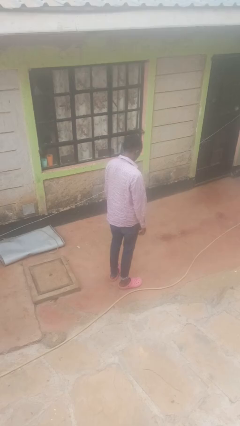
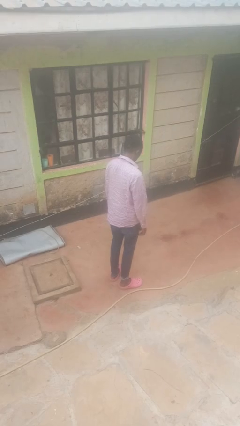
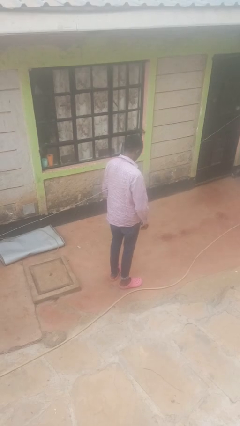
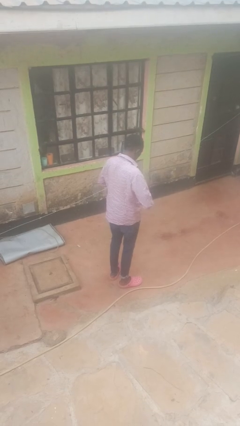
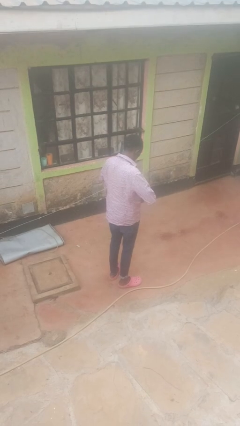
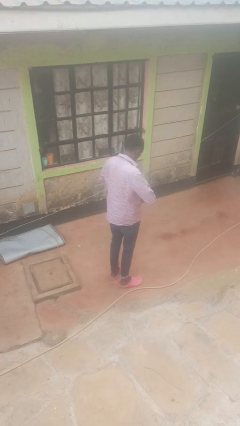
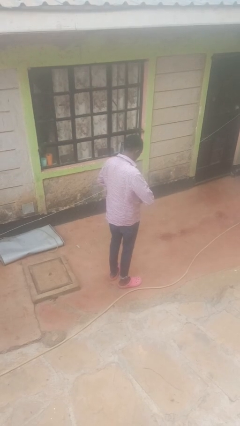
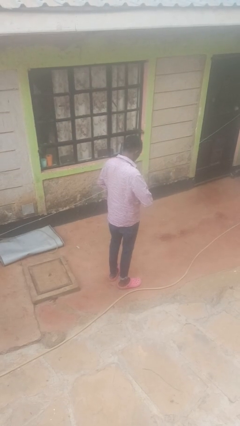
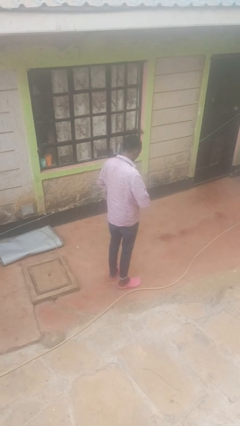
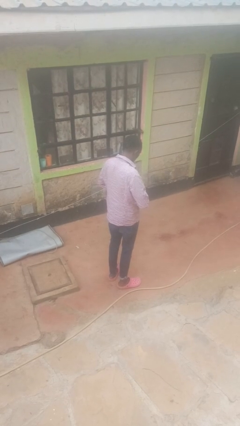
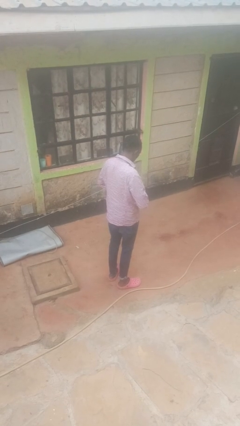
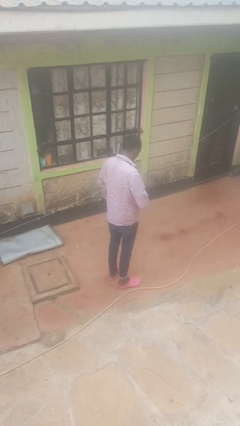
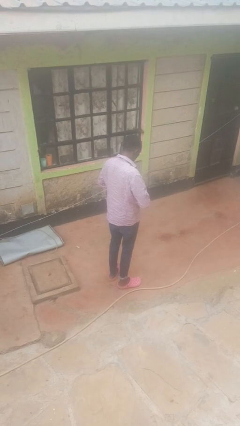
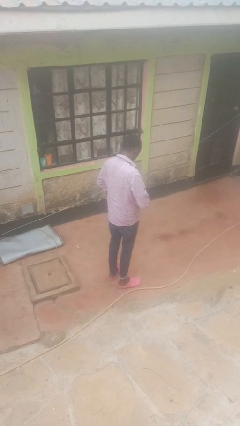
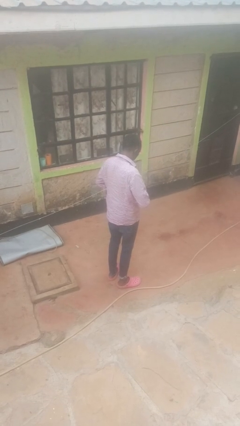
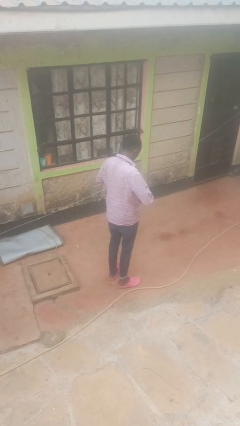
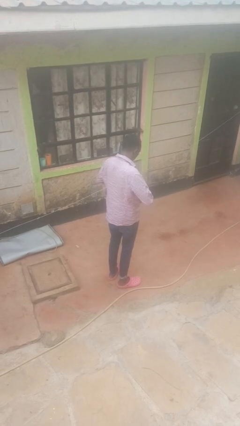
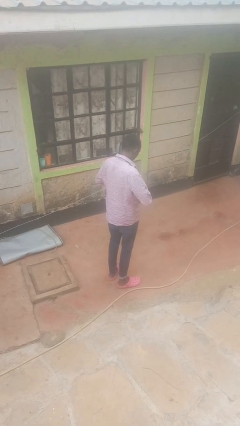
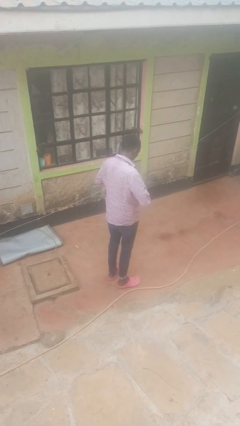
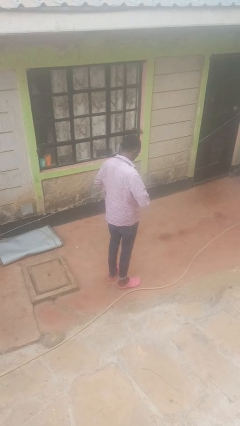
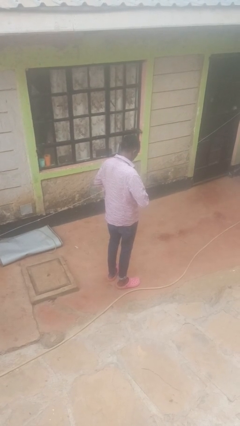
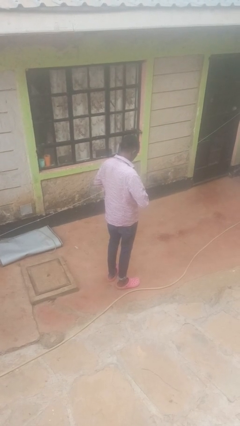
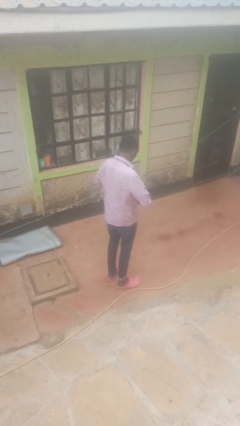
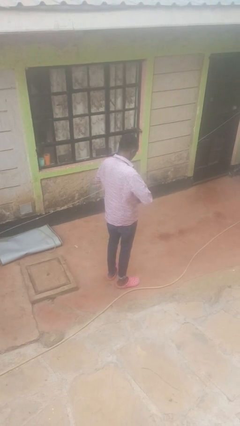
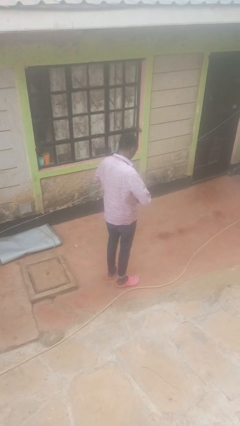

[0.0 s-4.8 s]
person buttons shirt

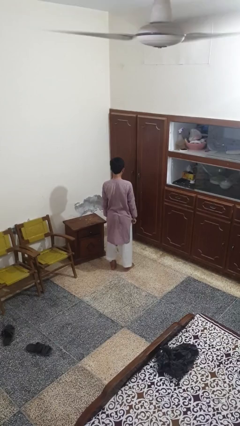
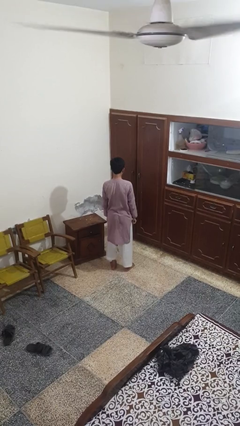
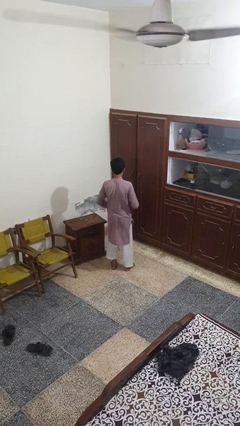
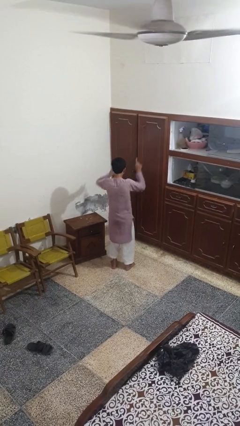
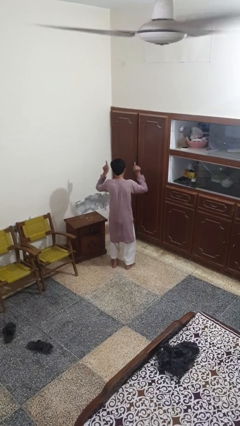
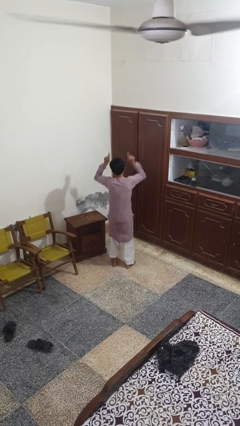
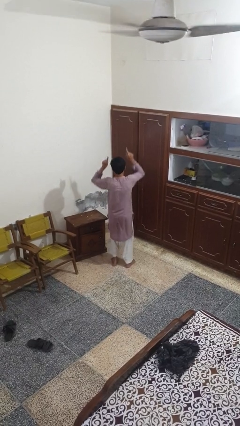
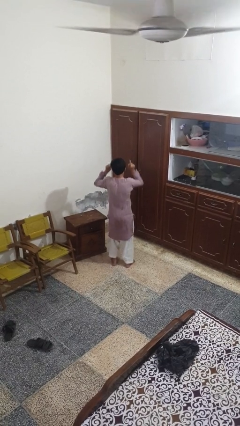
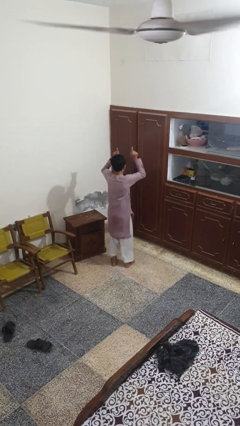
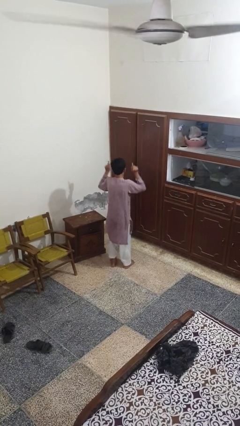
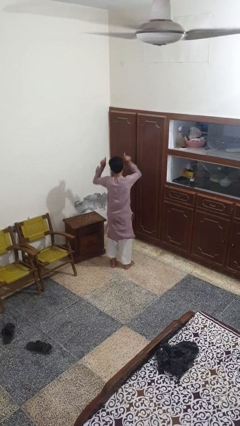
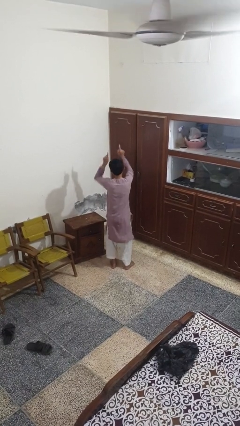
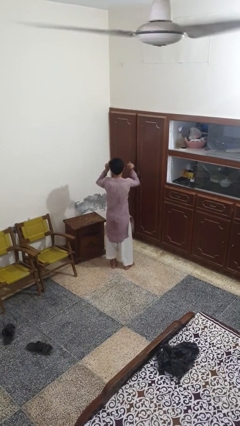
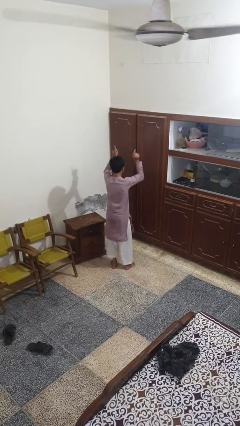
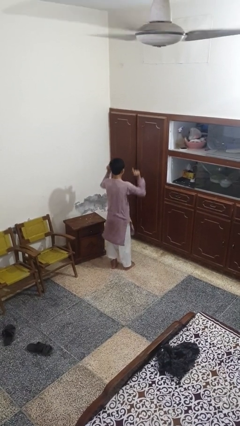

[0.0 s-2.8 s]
person dances in place

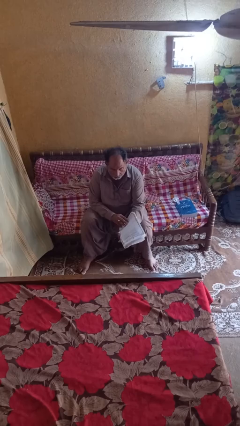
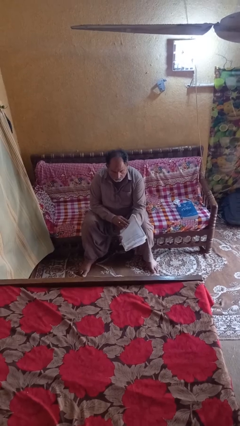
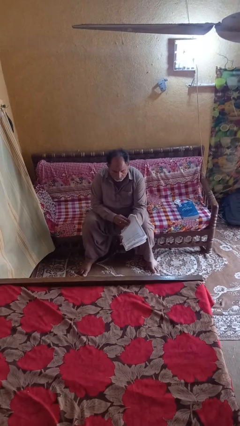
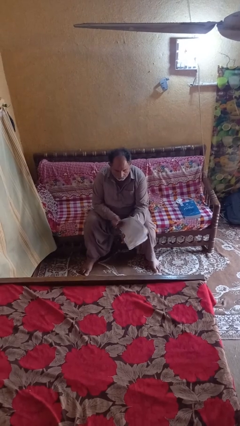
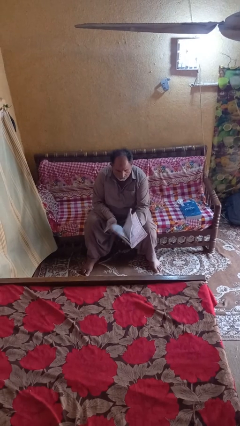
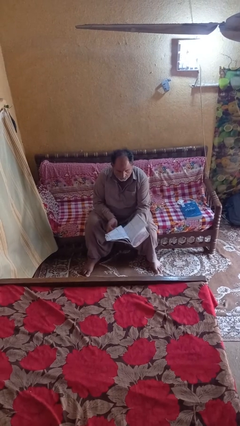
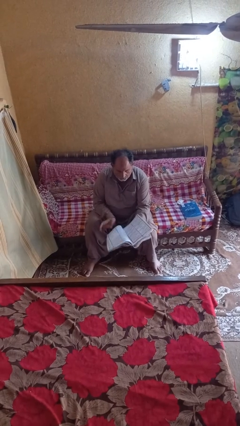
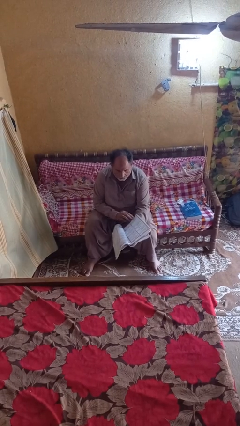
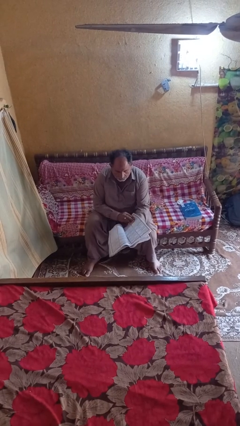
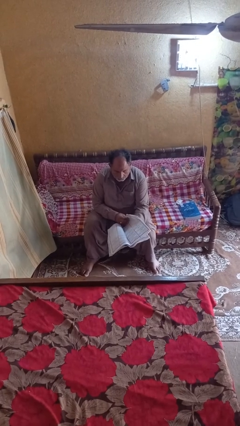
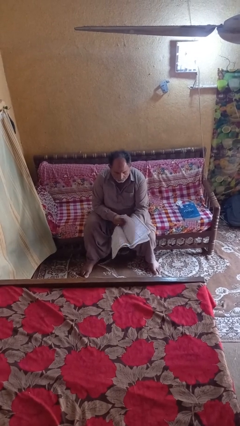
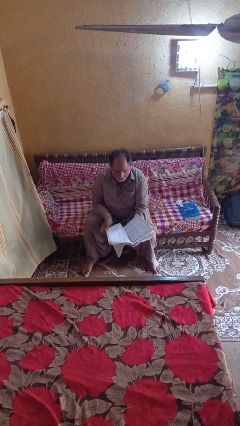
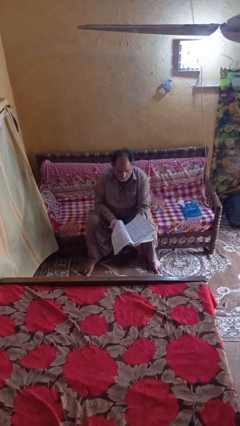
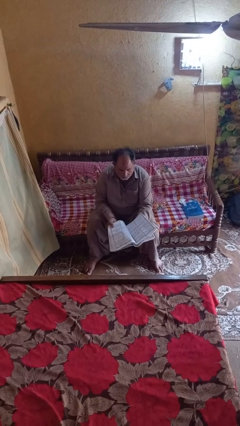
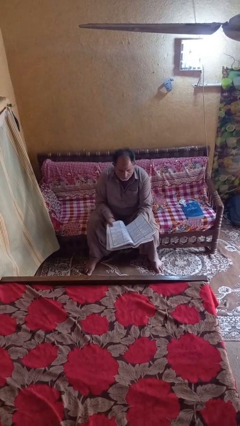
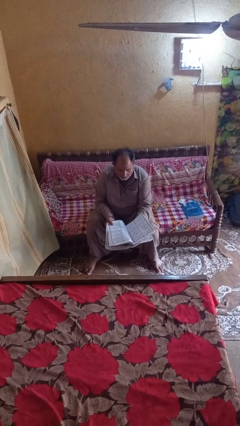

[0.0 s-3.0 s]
person reads magazine

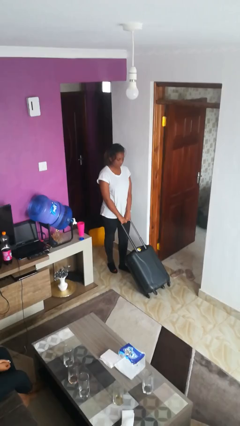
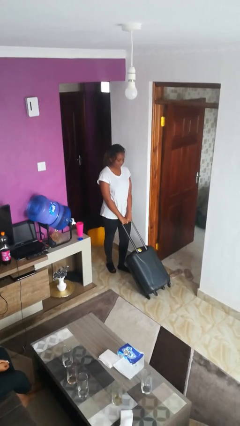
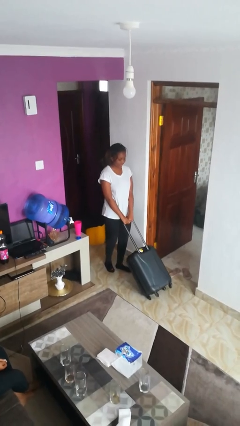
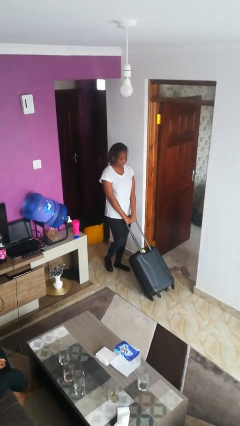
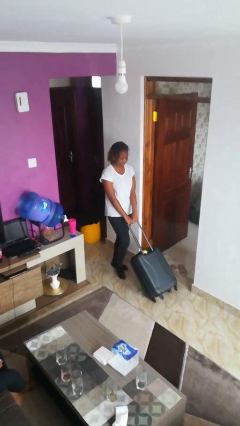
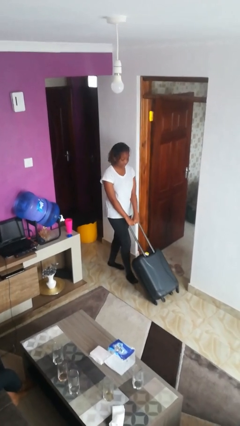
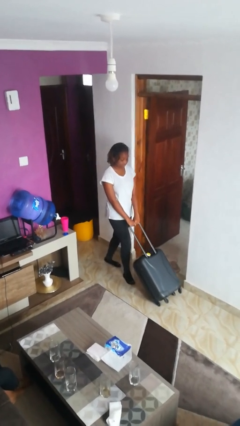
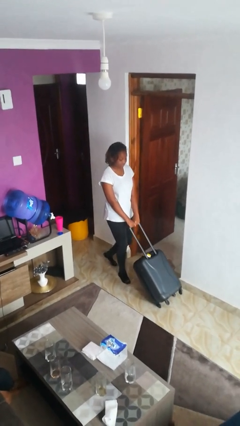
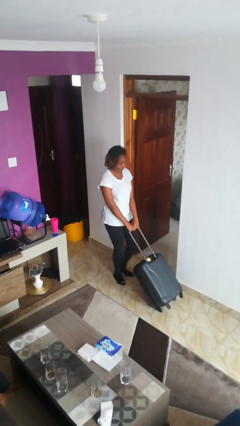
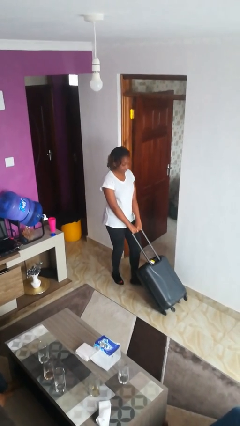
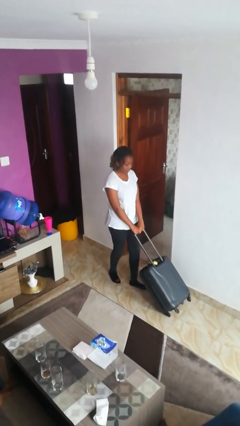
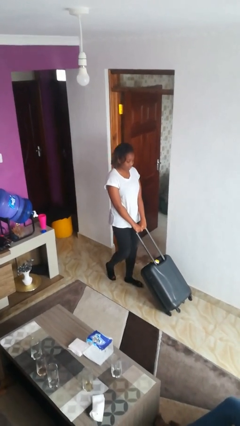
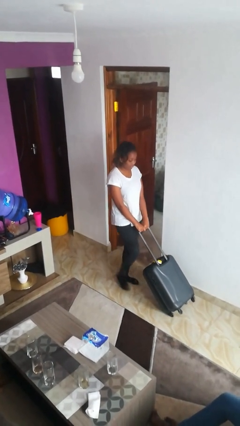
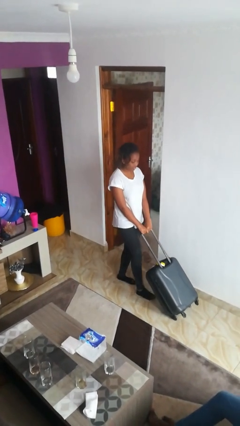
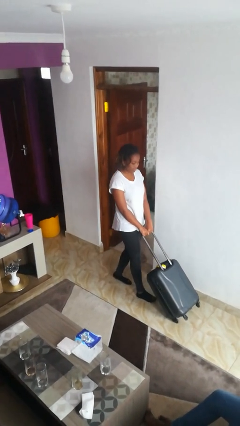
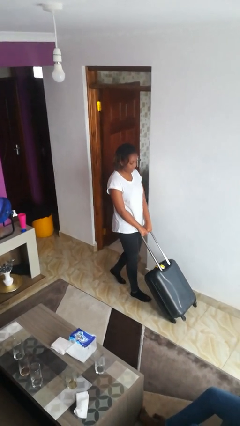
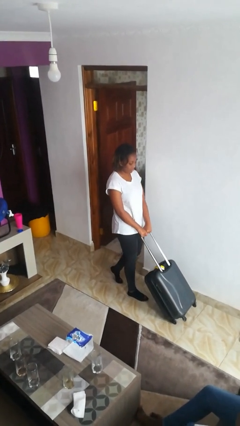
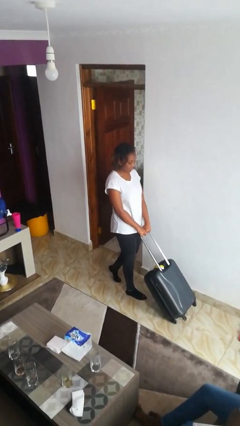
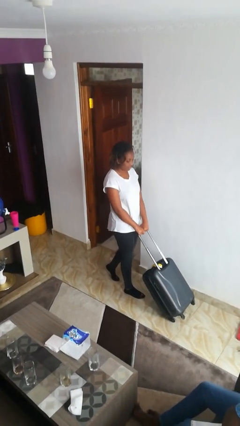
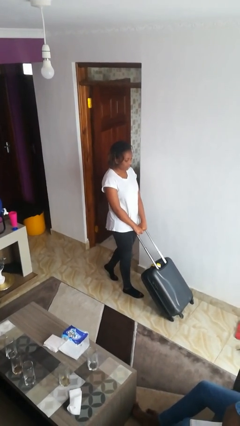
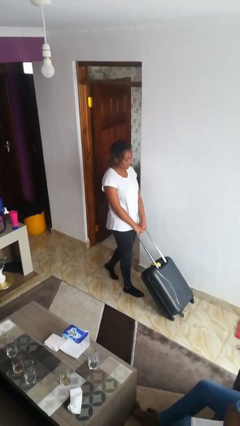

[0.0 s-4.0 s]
person pushes wheeled cart

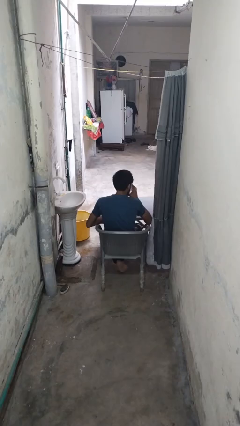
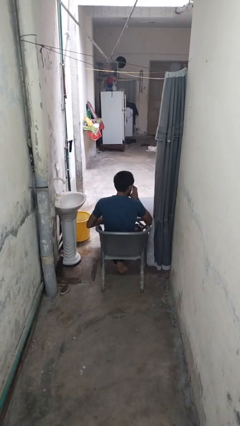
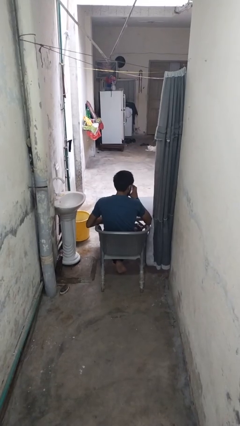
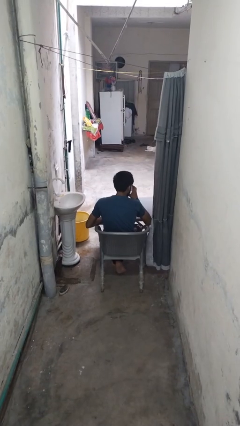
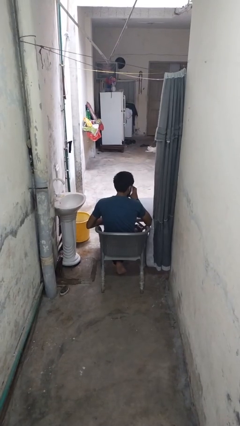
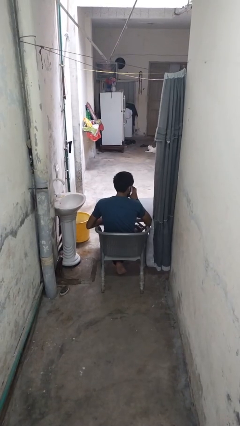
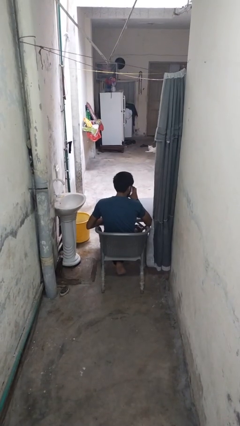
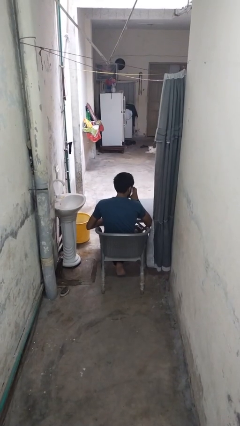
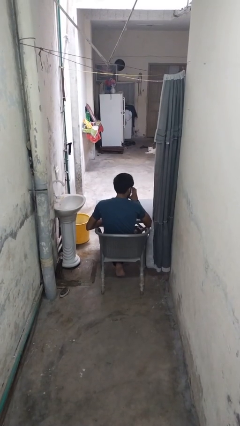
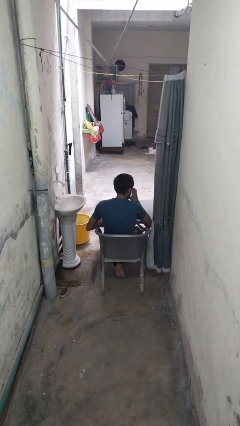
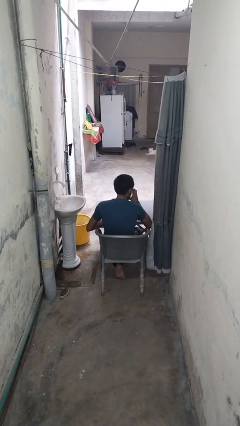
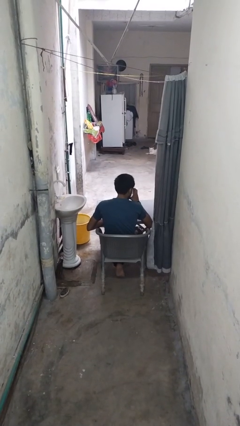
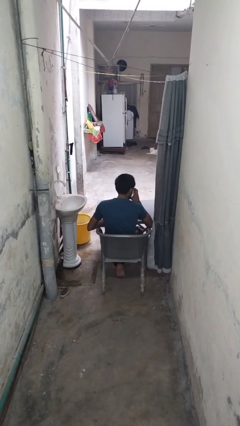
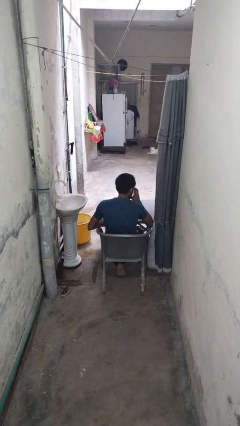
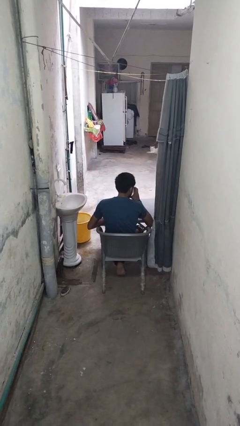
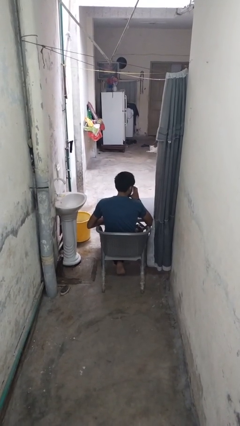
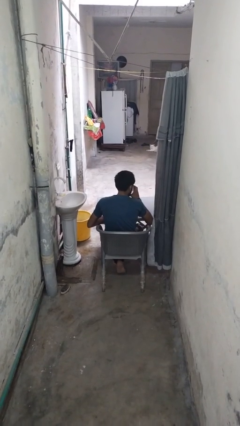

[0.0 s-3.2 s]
person drinks from mug
